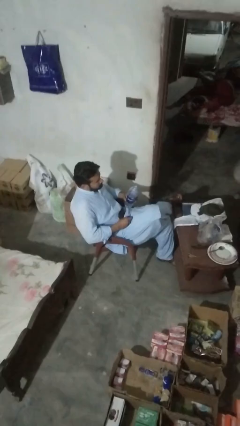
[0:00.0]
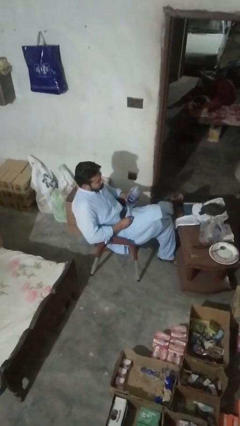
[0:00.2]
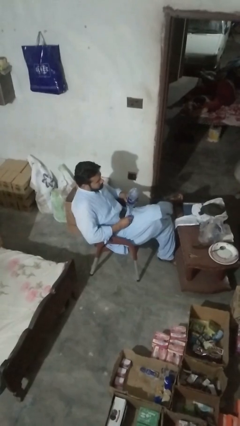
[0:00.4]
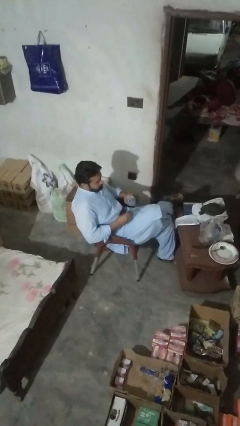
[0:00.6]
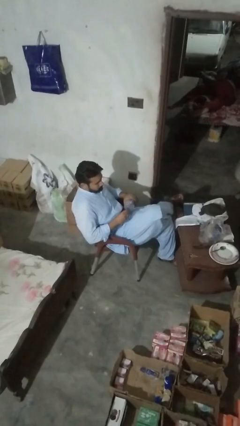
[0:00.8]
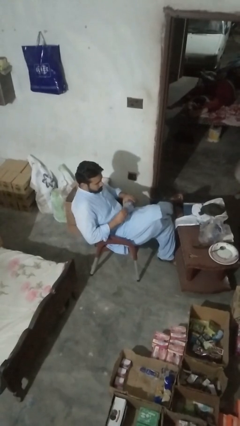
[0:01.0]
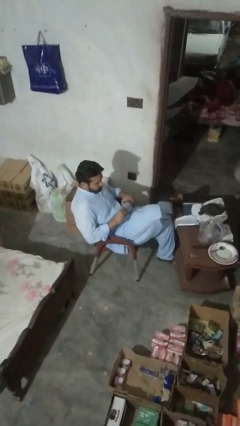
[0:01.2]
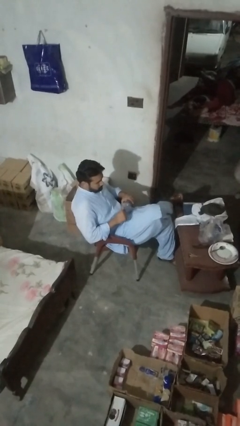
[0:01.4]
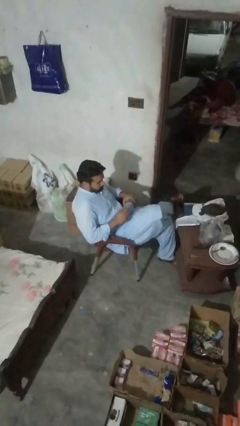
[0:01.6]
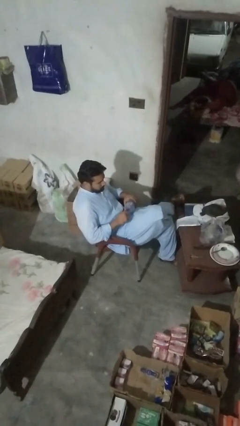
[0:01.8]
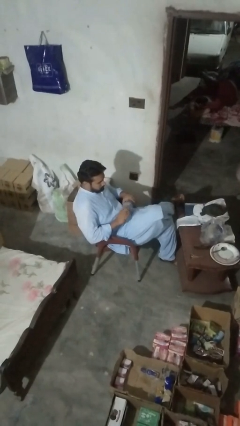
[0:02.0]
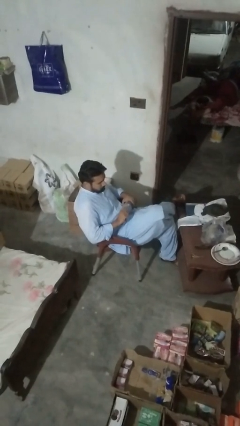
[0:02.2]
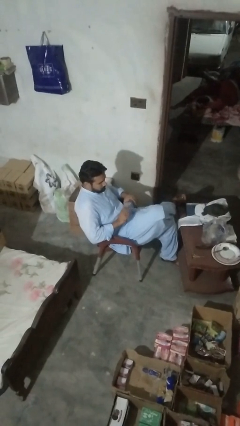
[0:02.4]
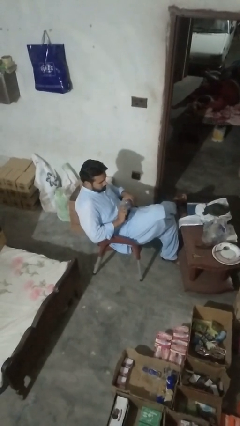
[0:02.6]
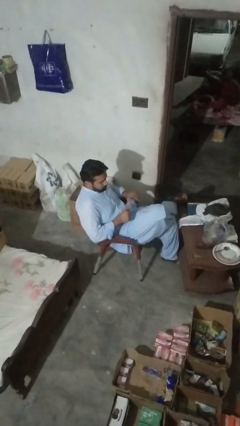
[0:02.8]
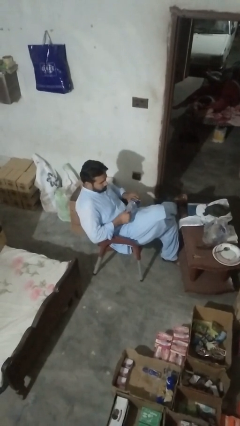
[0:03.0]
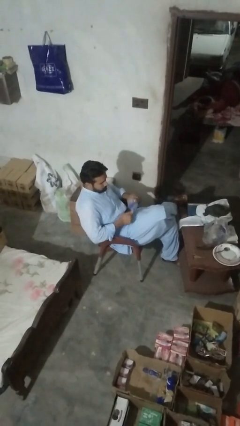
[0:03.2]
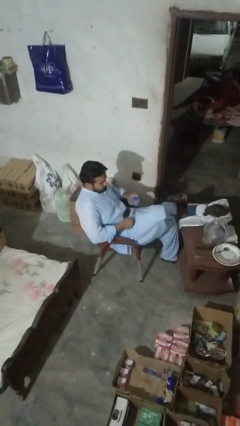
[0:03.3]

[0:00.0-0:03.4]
person screws lid to bottle

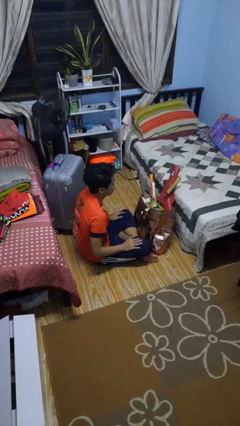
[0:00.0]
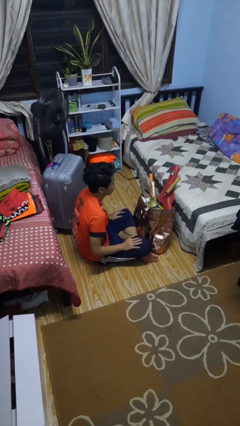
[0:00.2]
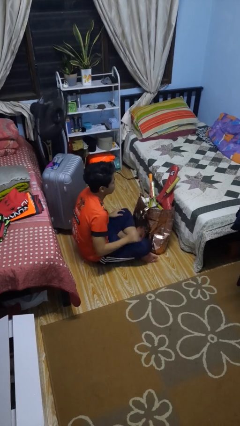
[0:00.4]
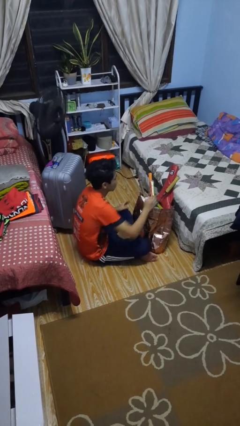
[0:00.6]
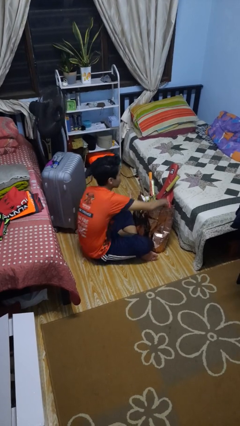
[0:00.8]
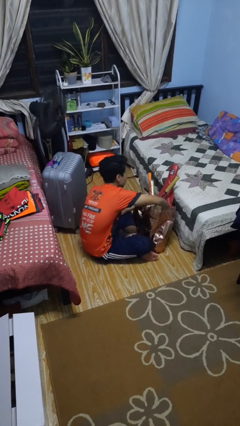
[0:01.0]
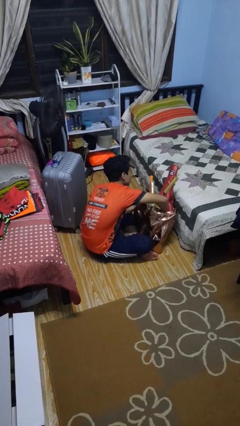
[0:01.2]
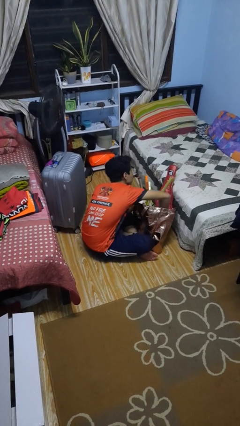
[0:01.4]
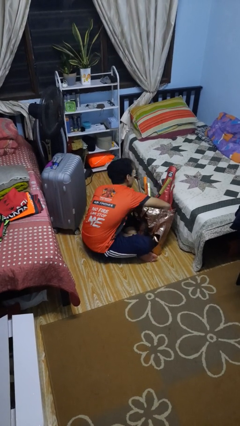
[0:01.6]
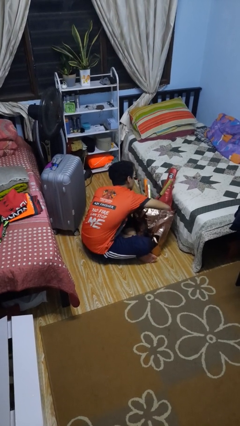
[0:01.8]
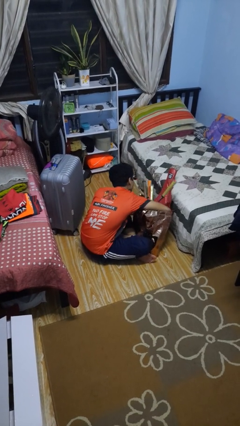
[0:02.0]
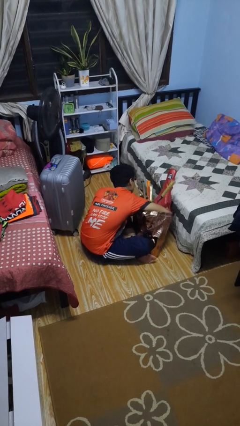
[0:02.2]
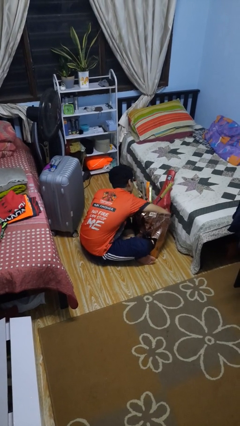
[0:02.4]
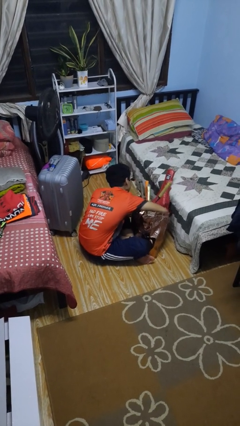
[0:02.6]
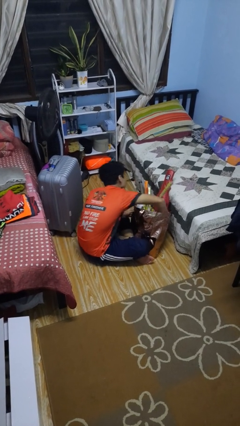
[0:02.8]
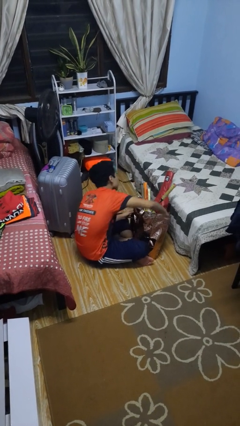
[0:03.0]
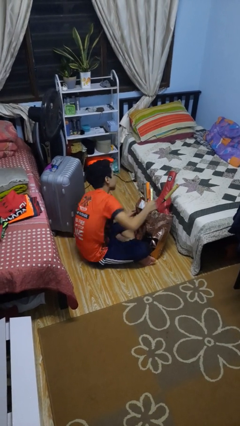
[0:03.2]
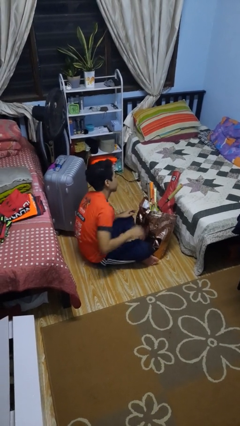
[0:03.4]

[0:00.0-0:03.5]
person searches in bag

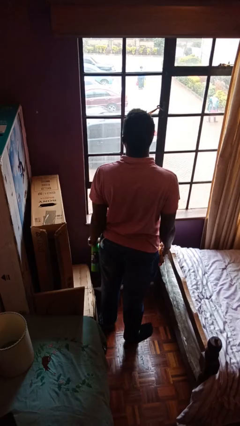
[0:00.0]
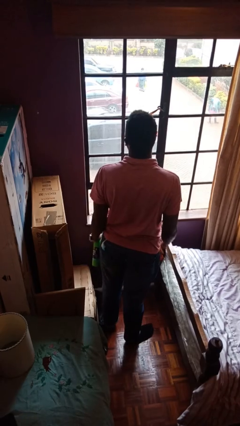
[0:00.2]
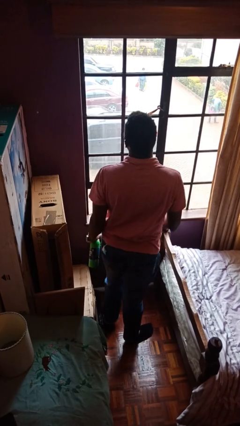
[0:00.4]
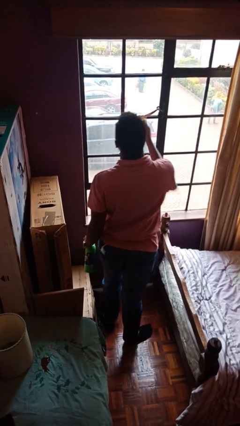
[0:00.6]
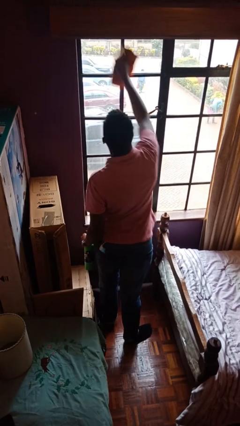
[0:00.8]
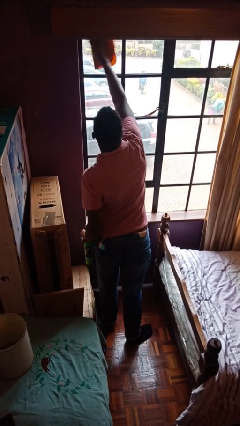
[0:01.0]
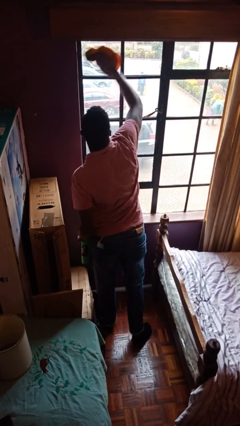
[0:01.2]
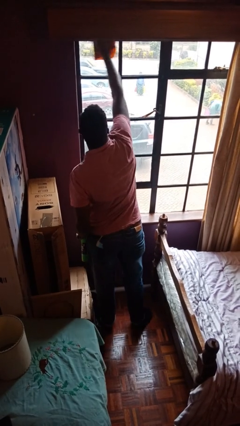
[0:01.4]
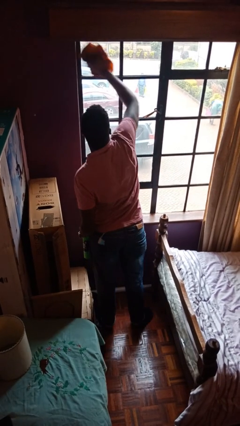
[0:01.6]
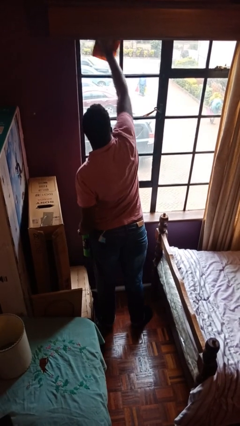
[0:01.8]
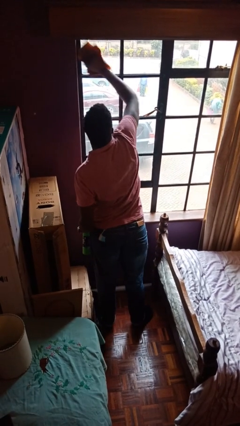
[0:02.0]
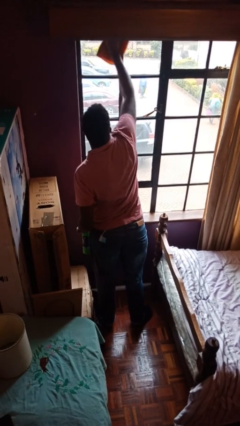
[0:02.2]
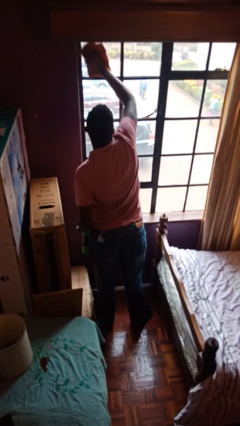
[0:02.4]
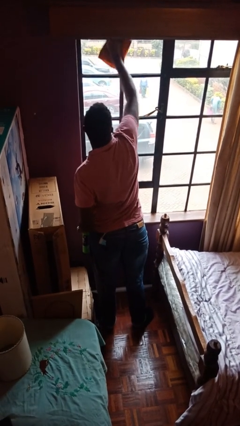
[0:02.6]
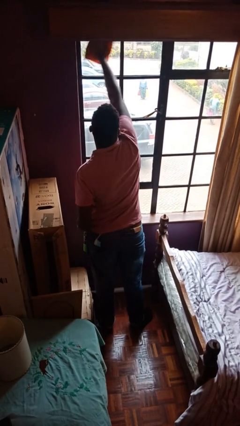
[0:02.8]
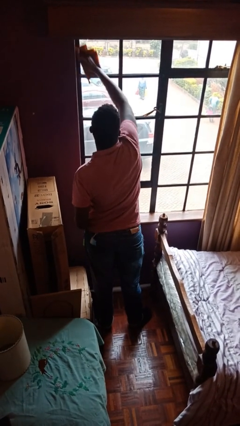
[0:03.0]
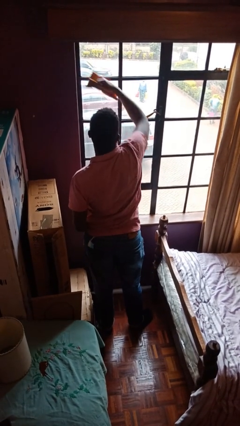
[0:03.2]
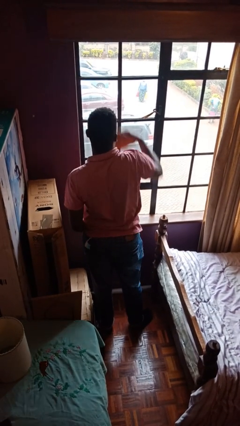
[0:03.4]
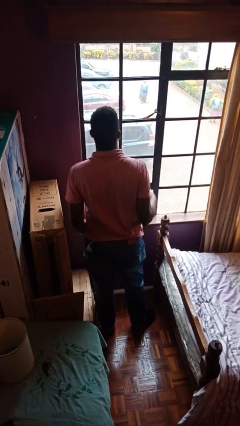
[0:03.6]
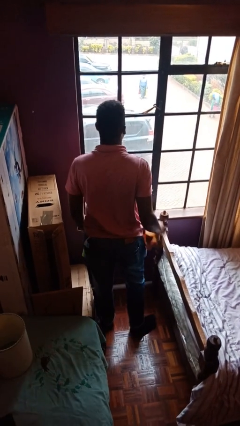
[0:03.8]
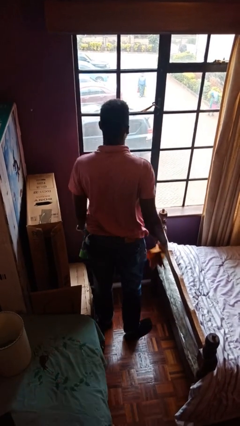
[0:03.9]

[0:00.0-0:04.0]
person washes window

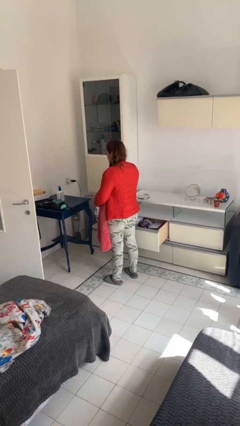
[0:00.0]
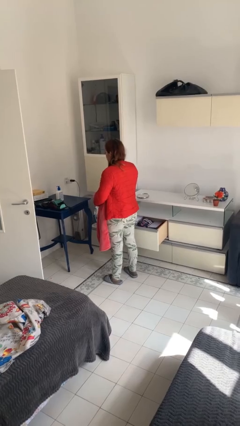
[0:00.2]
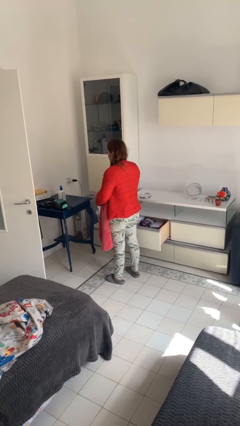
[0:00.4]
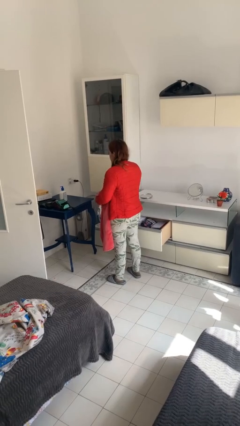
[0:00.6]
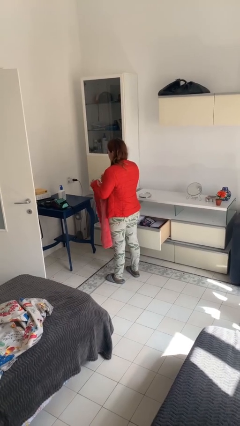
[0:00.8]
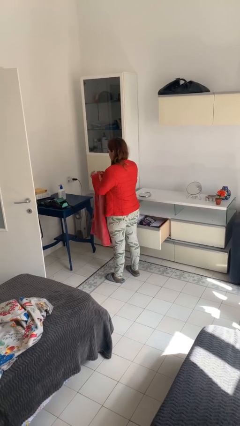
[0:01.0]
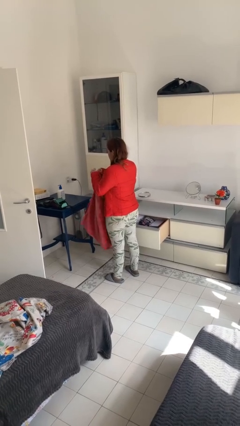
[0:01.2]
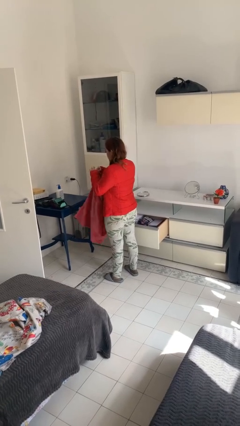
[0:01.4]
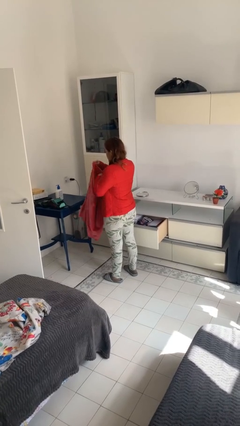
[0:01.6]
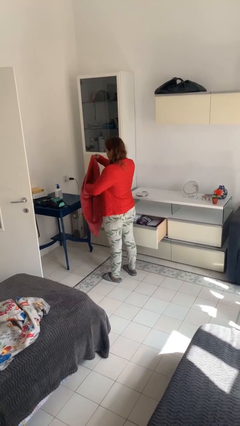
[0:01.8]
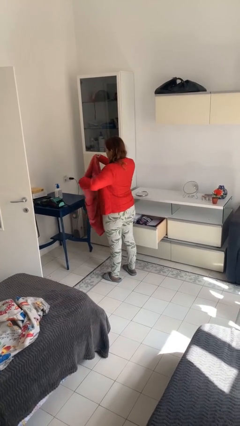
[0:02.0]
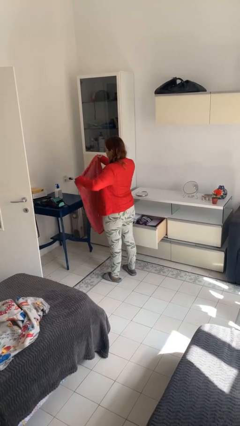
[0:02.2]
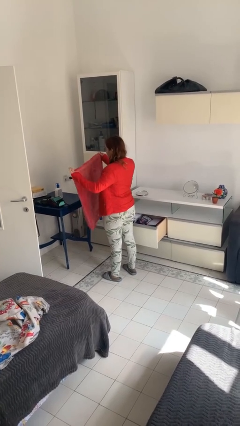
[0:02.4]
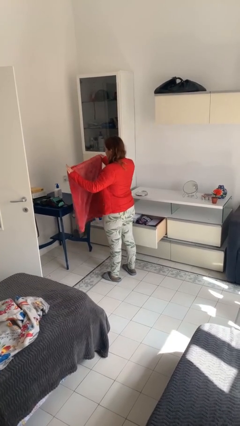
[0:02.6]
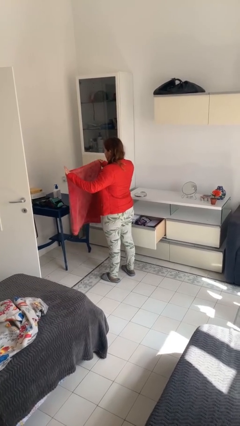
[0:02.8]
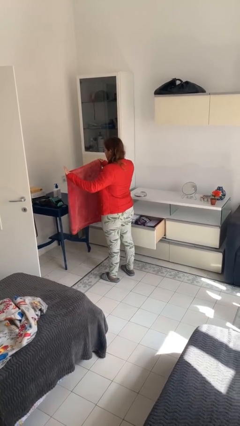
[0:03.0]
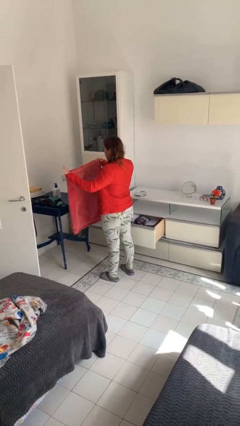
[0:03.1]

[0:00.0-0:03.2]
person folds blanket

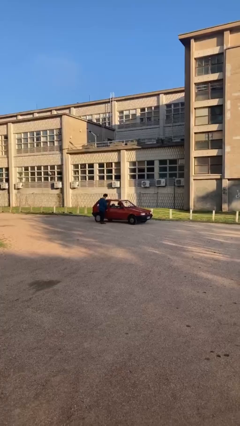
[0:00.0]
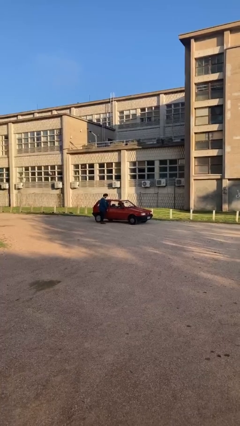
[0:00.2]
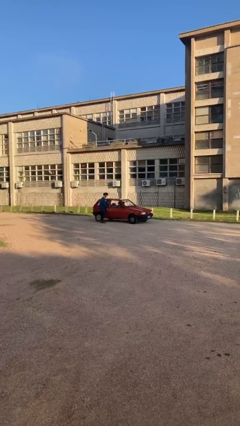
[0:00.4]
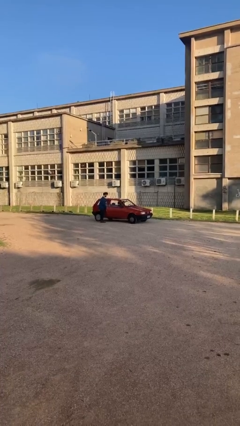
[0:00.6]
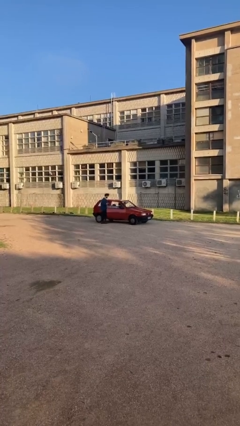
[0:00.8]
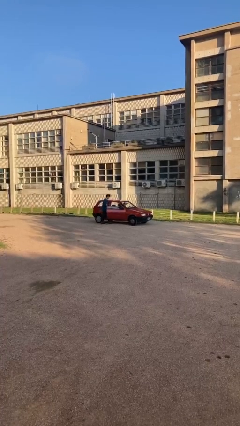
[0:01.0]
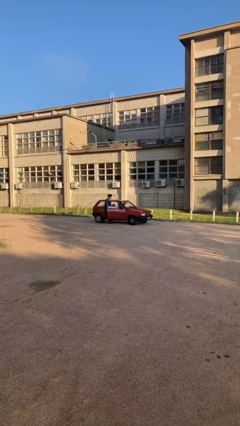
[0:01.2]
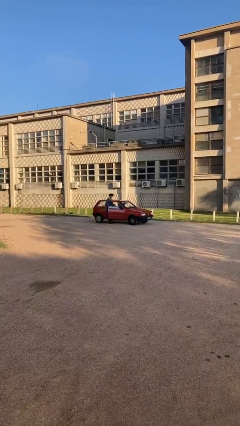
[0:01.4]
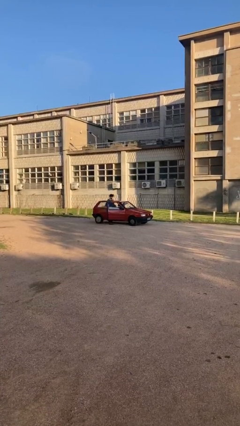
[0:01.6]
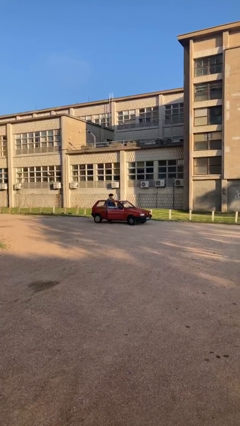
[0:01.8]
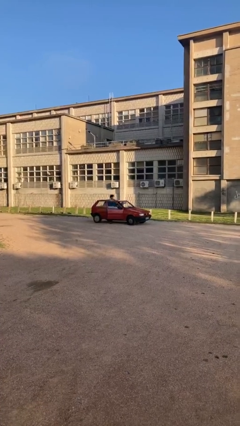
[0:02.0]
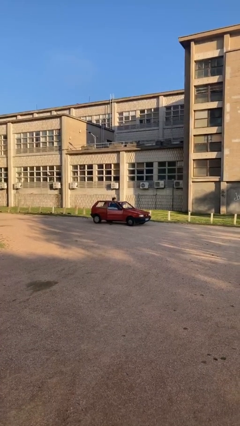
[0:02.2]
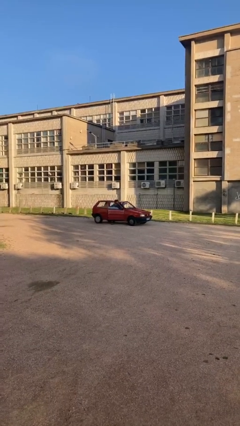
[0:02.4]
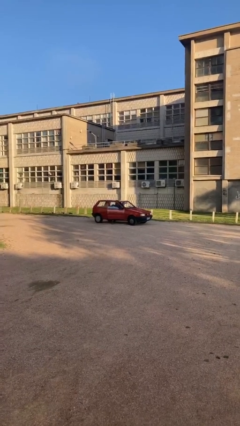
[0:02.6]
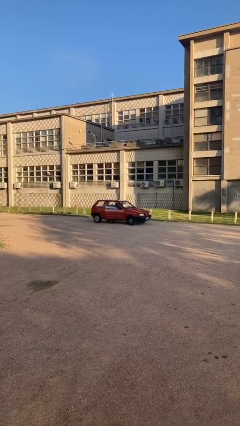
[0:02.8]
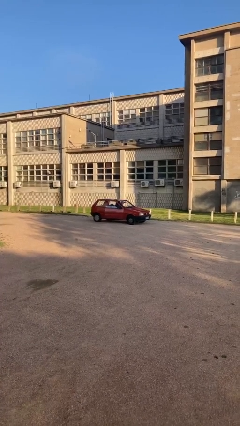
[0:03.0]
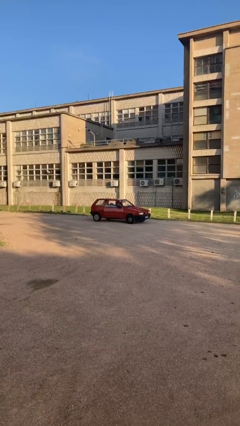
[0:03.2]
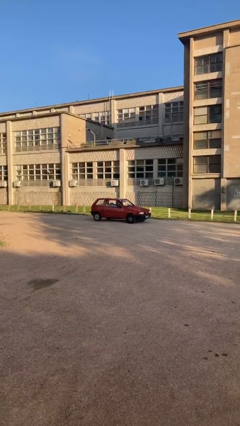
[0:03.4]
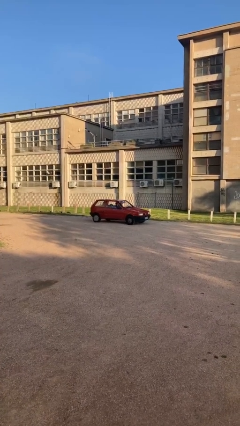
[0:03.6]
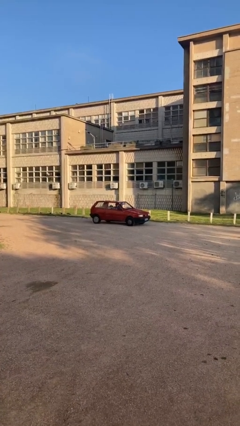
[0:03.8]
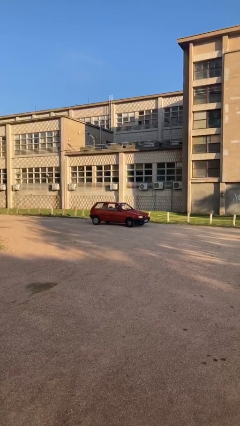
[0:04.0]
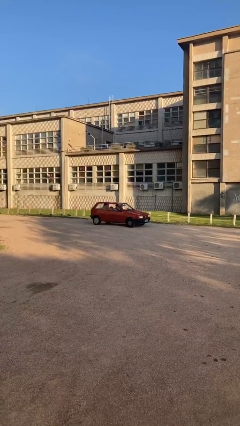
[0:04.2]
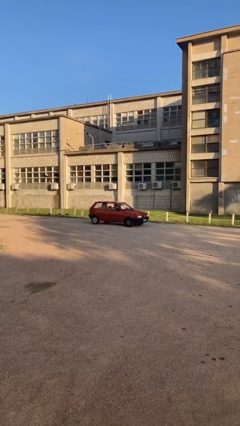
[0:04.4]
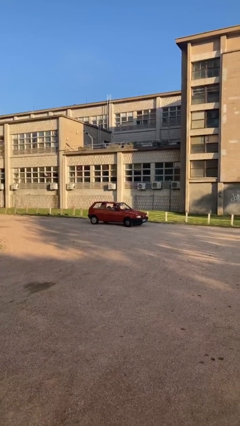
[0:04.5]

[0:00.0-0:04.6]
car picks up person
